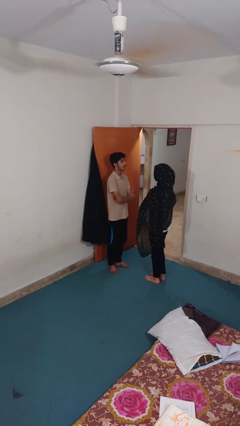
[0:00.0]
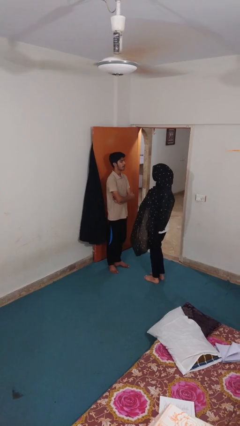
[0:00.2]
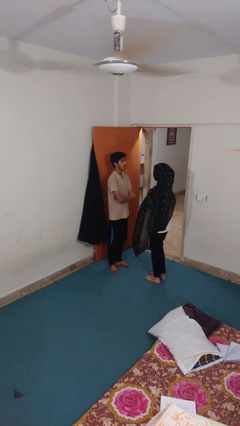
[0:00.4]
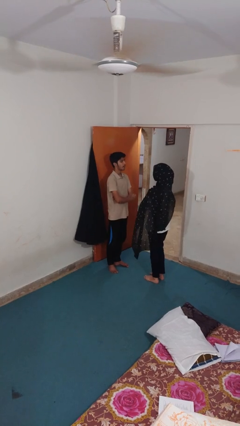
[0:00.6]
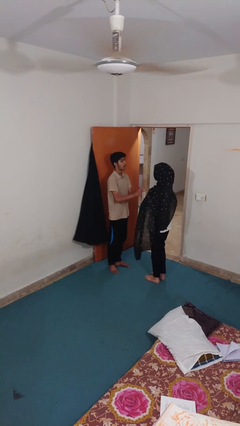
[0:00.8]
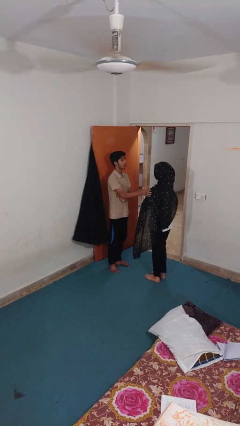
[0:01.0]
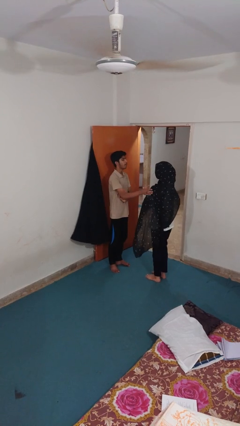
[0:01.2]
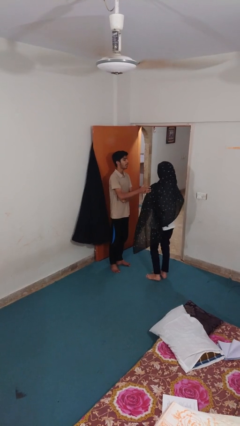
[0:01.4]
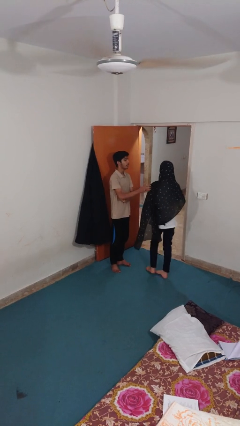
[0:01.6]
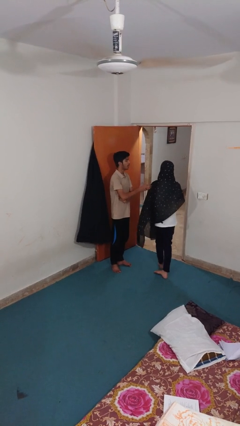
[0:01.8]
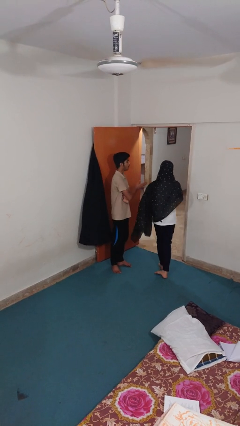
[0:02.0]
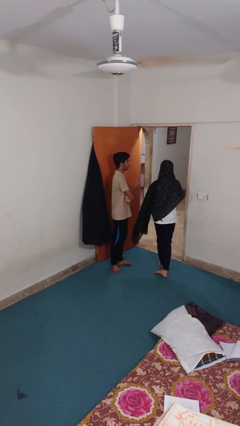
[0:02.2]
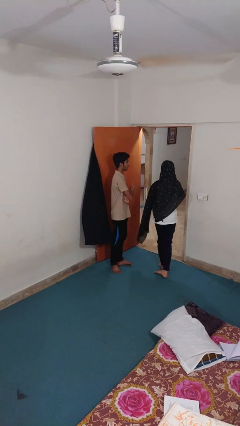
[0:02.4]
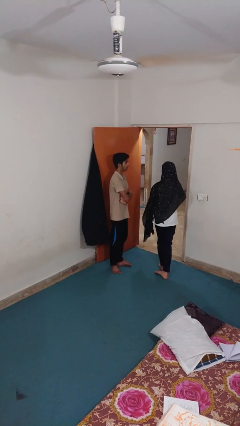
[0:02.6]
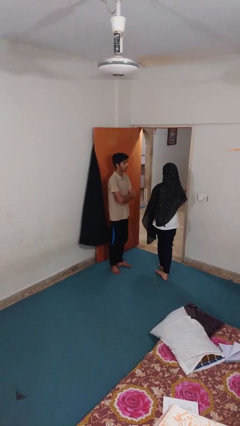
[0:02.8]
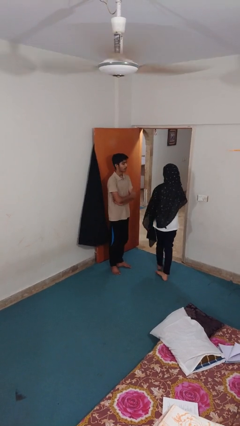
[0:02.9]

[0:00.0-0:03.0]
person shoves person

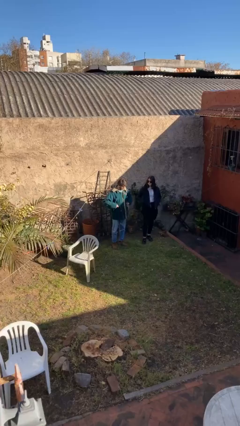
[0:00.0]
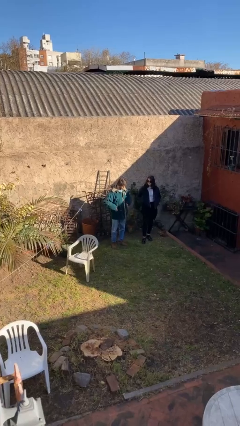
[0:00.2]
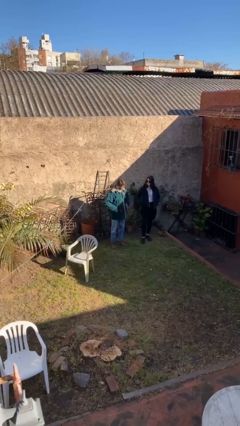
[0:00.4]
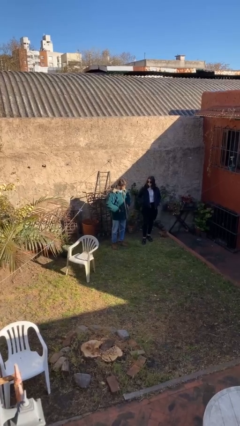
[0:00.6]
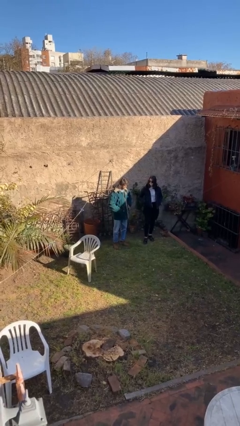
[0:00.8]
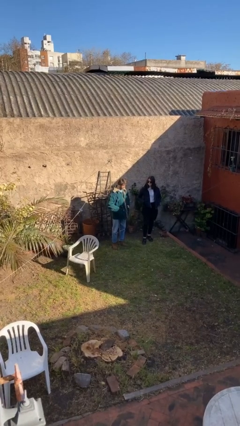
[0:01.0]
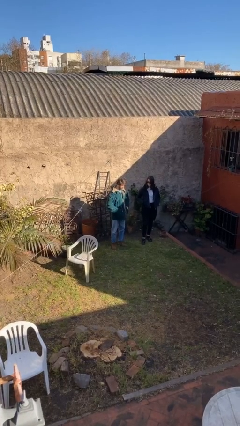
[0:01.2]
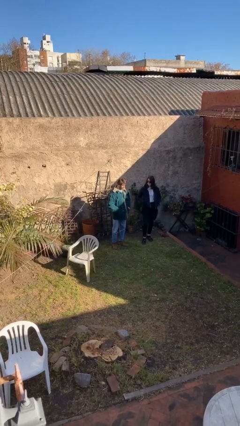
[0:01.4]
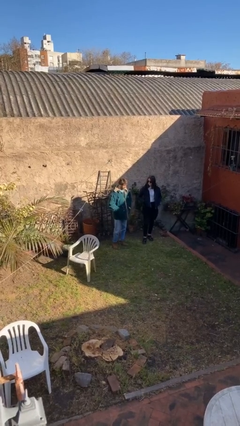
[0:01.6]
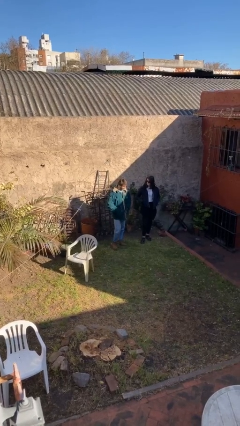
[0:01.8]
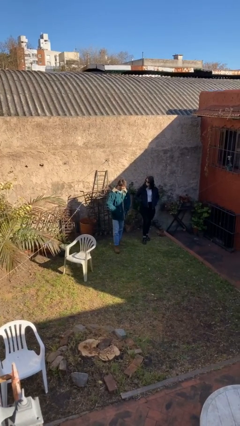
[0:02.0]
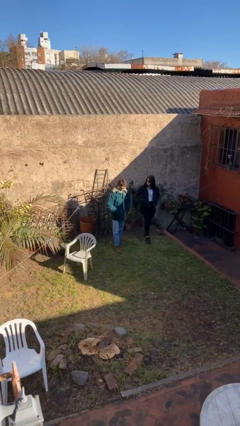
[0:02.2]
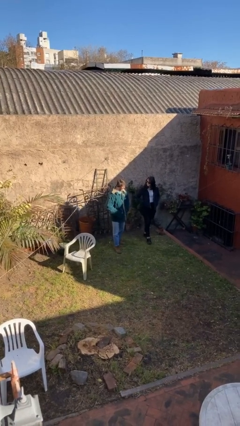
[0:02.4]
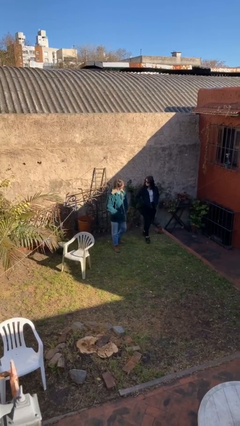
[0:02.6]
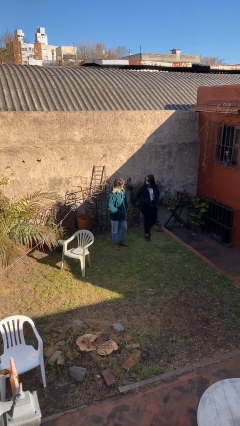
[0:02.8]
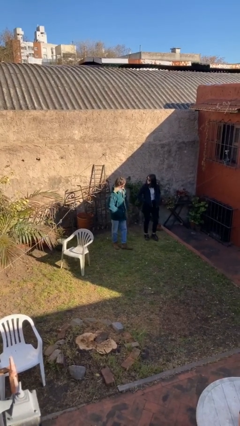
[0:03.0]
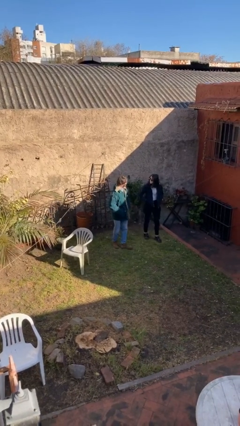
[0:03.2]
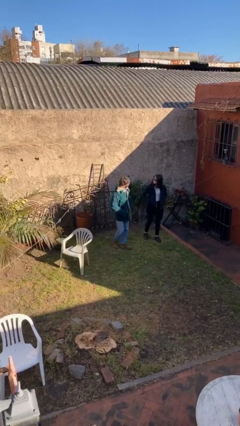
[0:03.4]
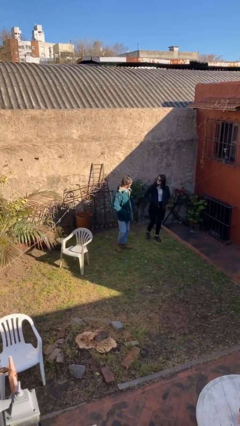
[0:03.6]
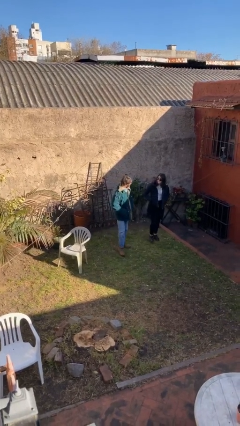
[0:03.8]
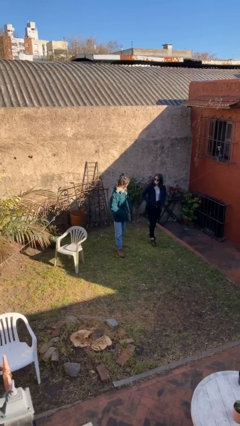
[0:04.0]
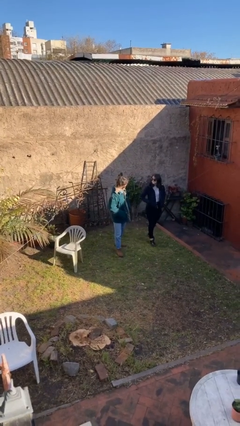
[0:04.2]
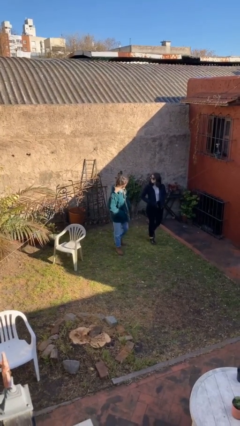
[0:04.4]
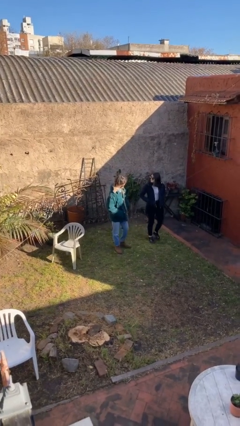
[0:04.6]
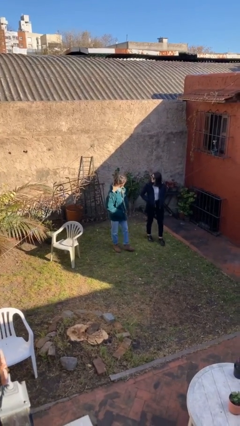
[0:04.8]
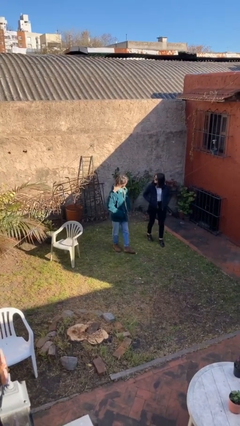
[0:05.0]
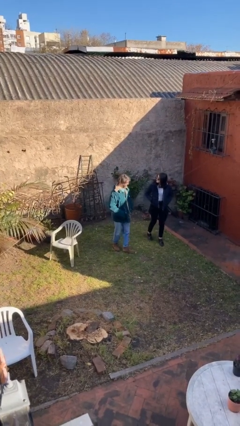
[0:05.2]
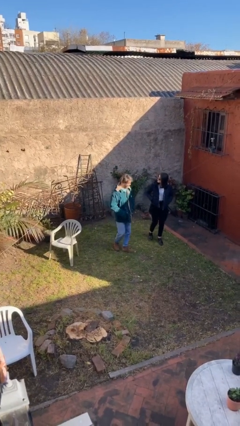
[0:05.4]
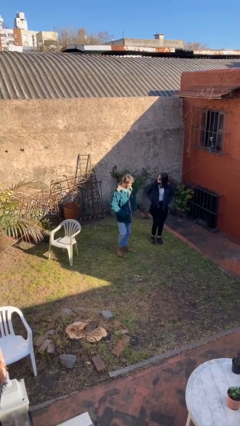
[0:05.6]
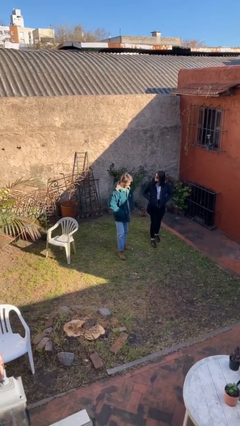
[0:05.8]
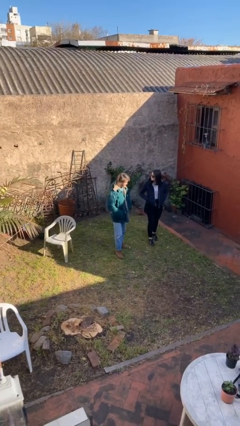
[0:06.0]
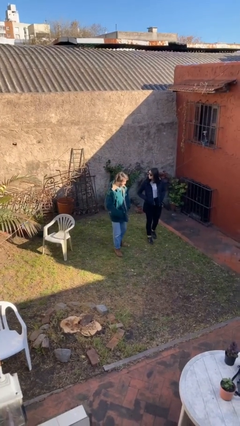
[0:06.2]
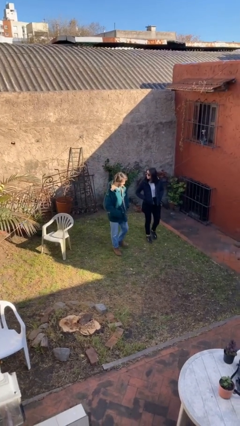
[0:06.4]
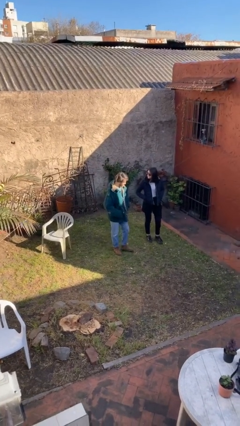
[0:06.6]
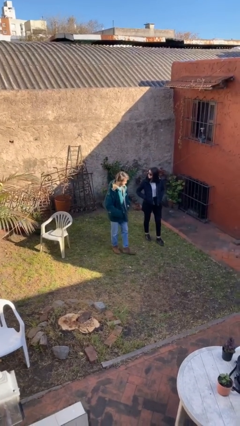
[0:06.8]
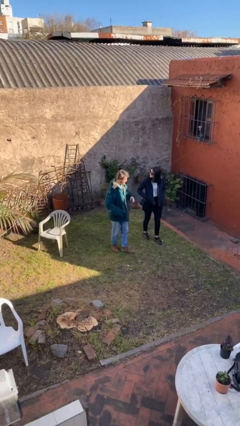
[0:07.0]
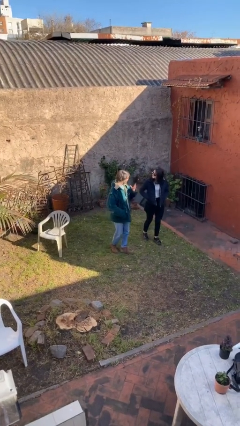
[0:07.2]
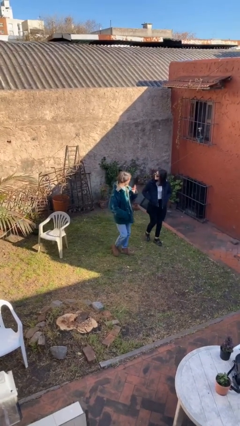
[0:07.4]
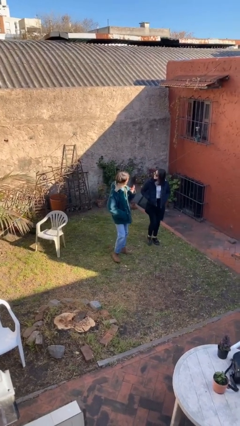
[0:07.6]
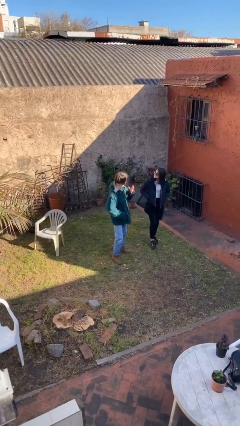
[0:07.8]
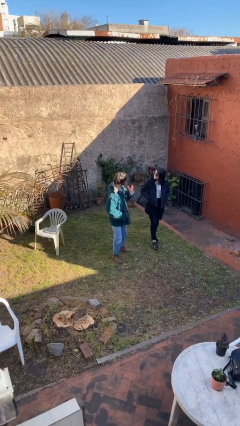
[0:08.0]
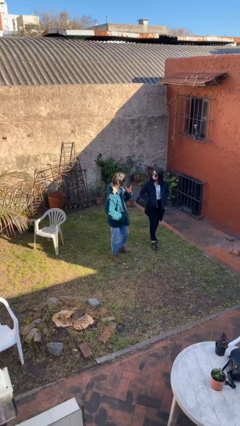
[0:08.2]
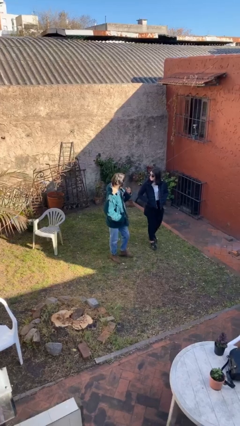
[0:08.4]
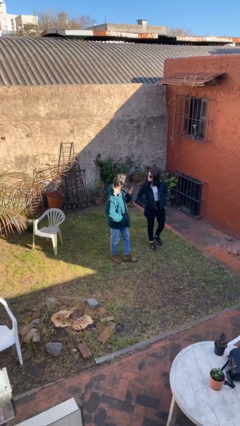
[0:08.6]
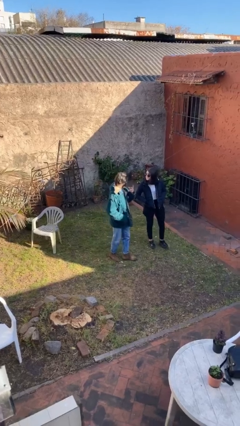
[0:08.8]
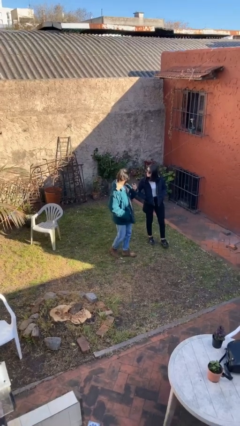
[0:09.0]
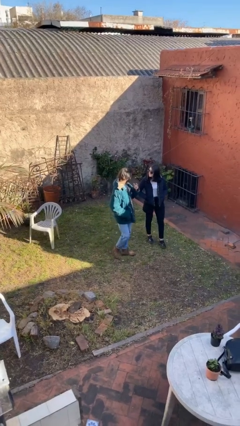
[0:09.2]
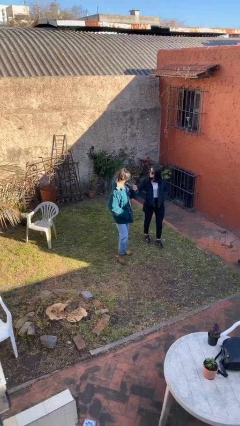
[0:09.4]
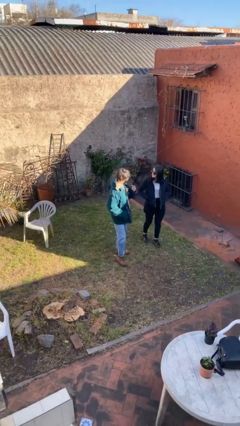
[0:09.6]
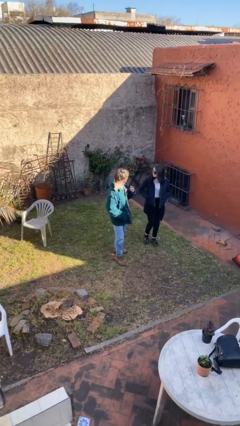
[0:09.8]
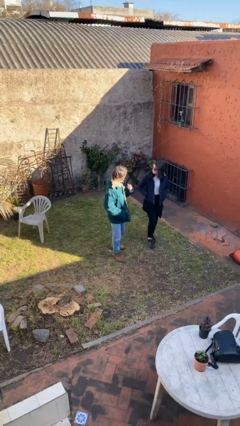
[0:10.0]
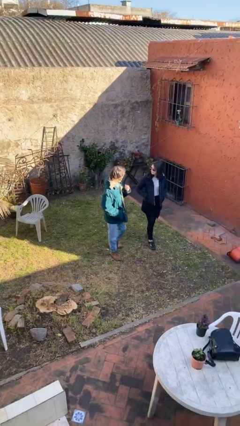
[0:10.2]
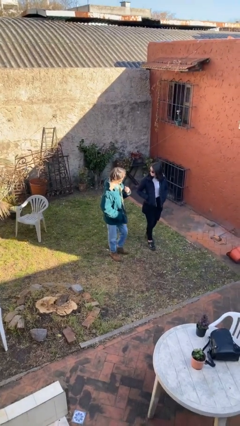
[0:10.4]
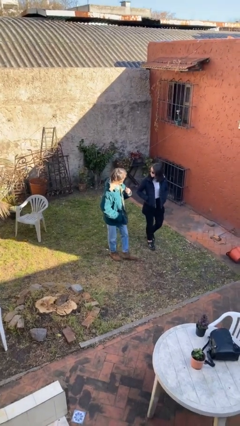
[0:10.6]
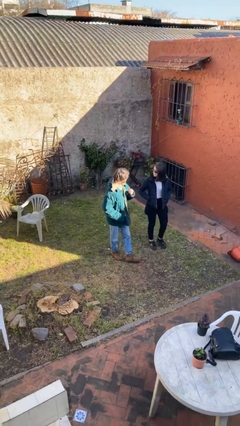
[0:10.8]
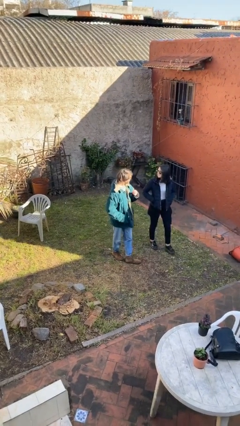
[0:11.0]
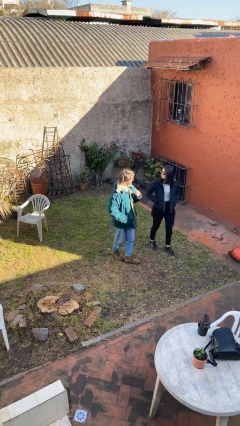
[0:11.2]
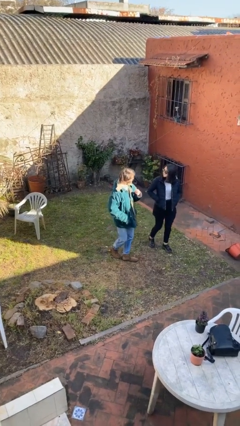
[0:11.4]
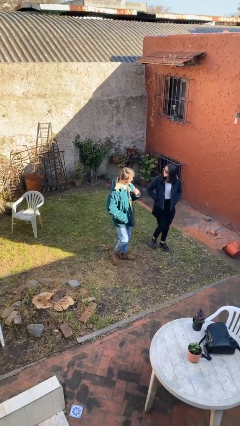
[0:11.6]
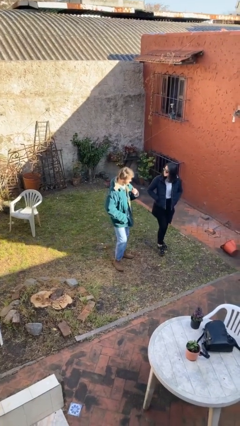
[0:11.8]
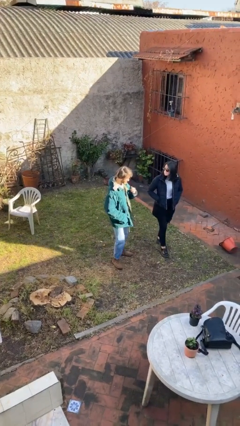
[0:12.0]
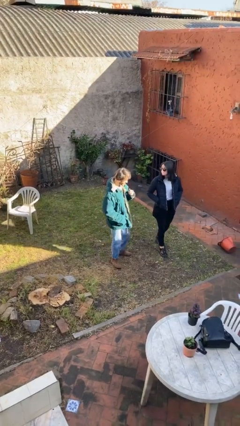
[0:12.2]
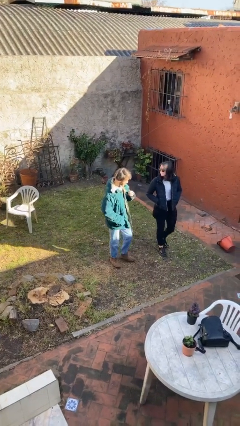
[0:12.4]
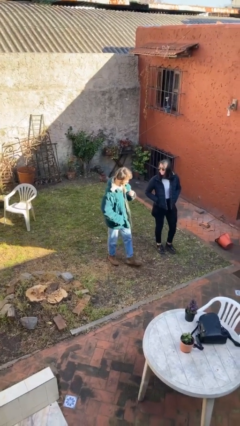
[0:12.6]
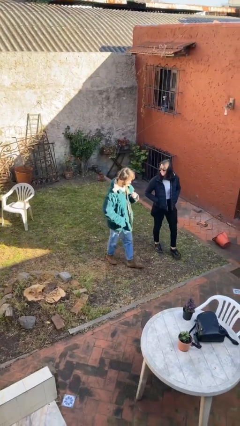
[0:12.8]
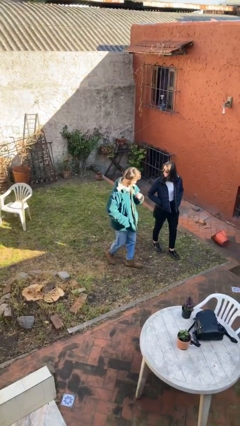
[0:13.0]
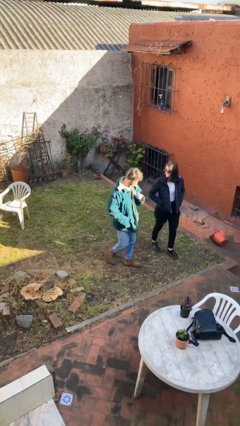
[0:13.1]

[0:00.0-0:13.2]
person talks to person

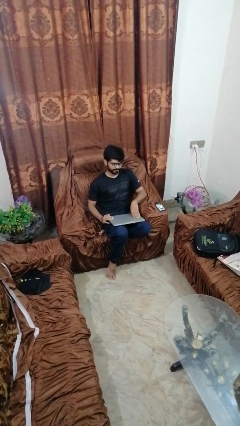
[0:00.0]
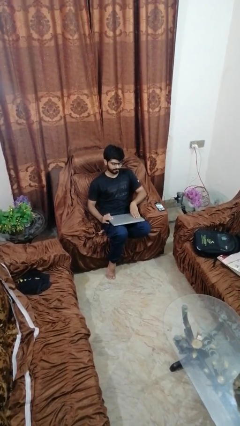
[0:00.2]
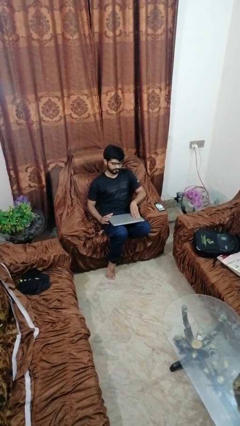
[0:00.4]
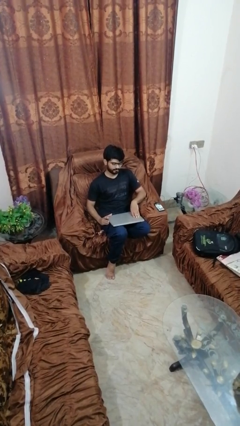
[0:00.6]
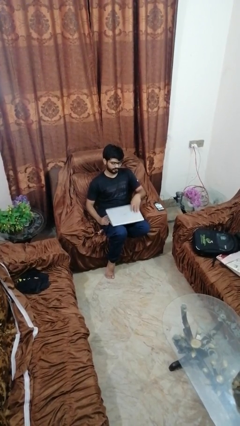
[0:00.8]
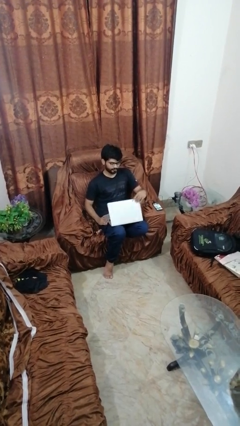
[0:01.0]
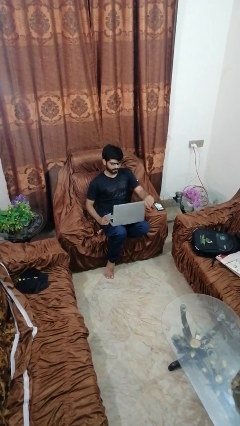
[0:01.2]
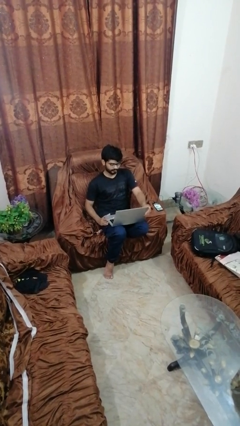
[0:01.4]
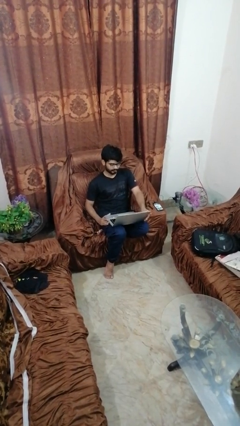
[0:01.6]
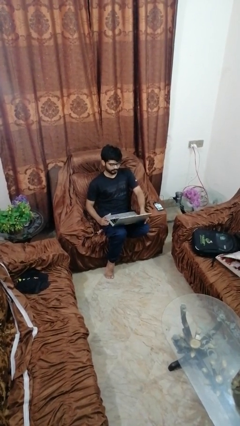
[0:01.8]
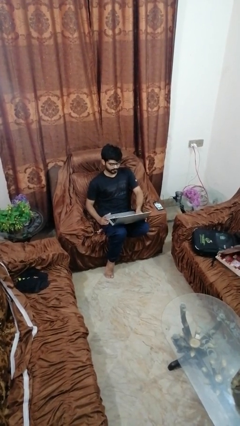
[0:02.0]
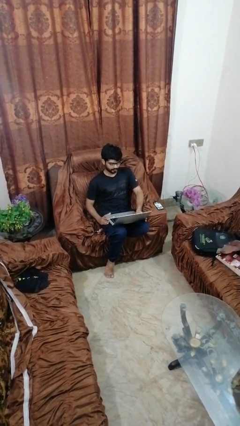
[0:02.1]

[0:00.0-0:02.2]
person opens laptop
